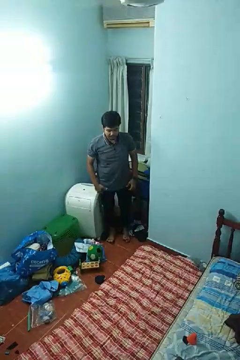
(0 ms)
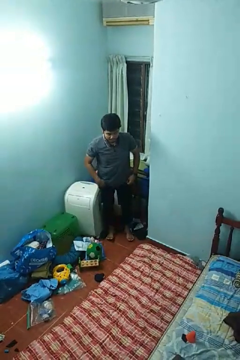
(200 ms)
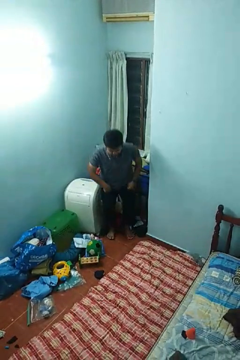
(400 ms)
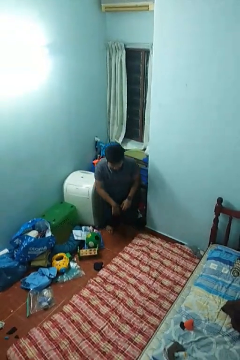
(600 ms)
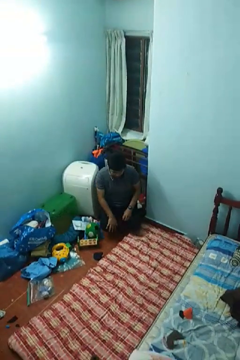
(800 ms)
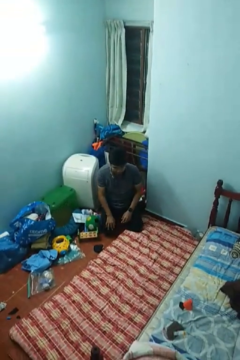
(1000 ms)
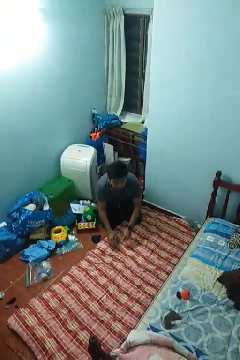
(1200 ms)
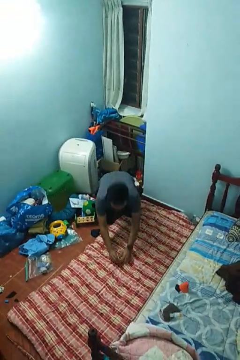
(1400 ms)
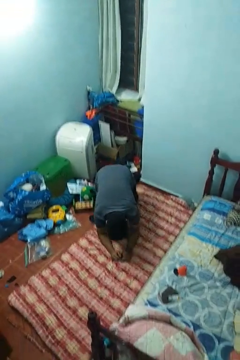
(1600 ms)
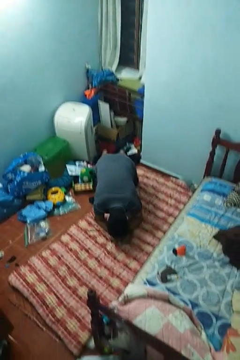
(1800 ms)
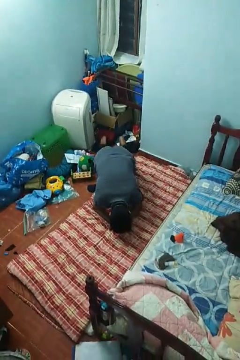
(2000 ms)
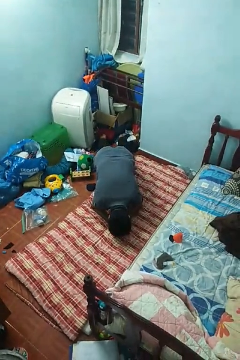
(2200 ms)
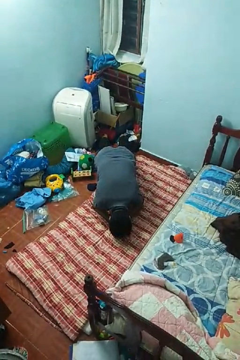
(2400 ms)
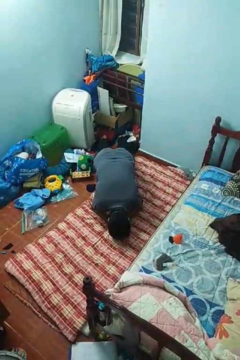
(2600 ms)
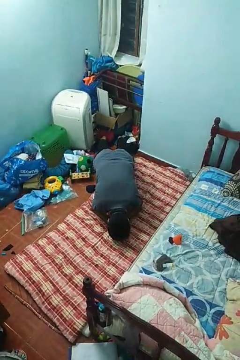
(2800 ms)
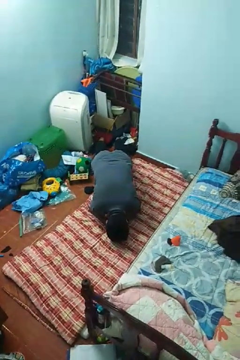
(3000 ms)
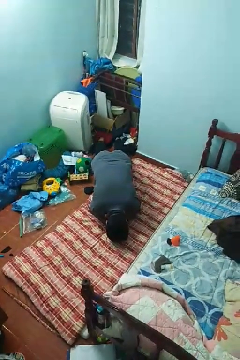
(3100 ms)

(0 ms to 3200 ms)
person exercises with plank

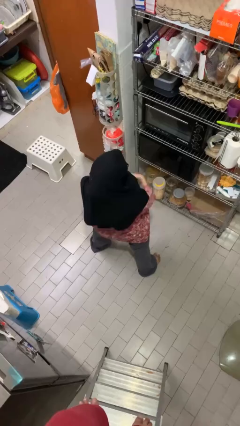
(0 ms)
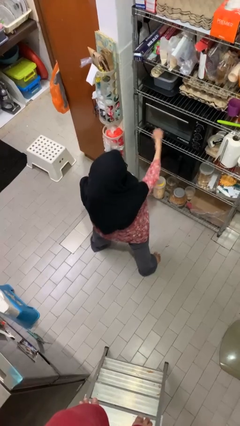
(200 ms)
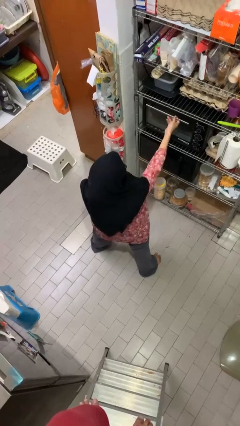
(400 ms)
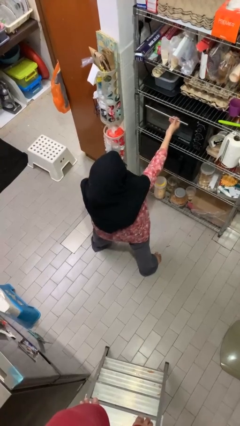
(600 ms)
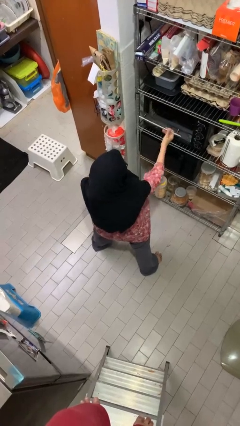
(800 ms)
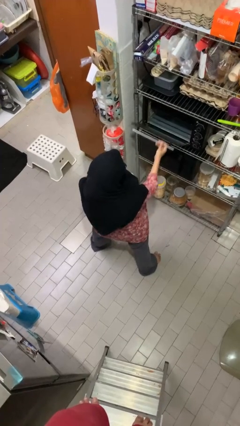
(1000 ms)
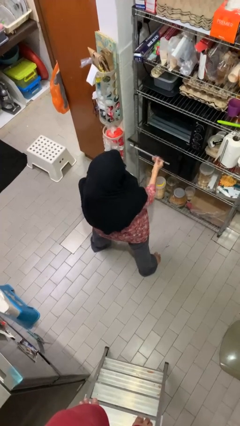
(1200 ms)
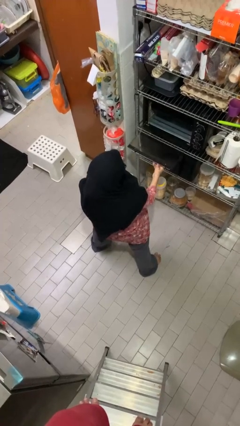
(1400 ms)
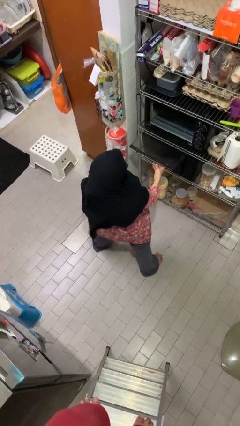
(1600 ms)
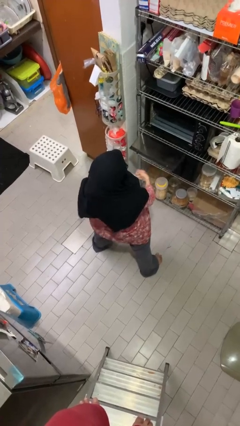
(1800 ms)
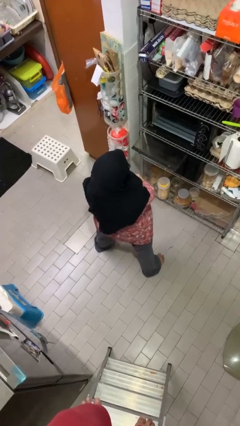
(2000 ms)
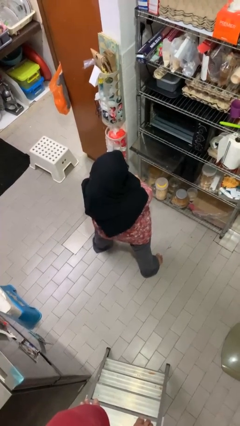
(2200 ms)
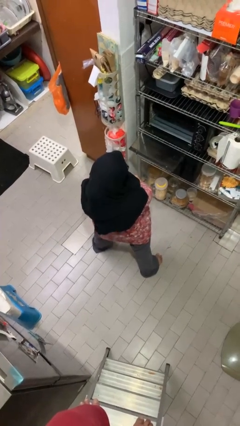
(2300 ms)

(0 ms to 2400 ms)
person opens oven door

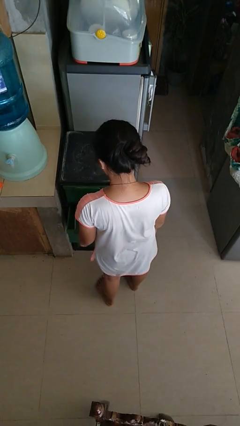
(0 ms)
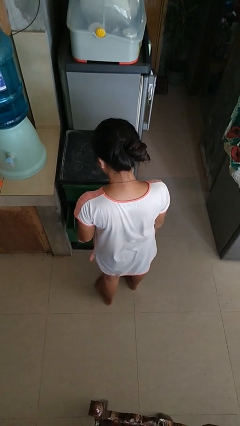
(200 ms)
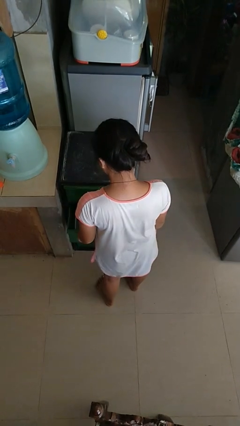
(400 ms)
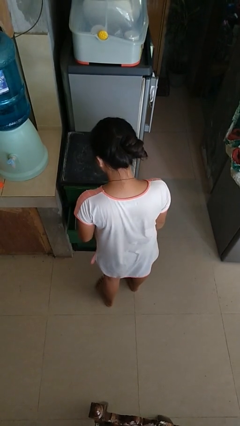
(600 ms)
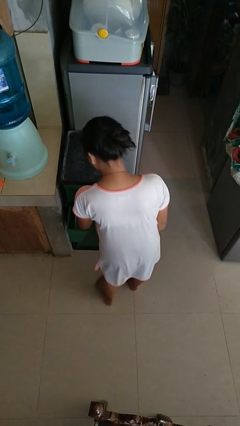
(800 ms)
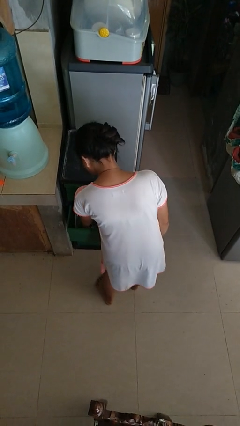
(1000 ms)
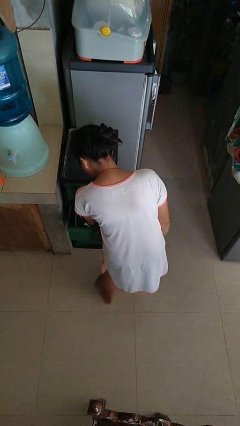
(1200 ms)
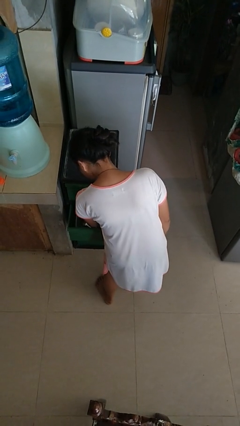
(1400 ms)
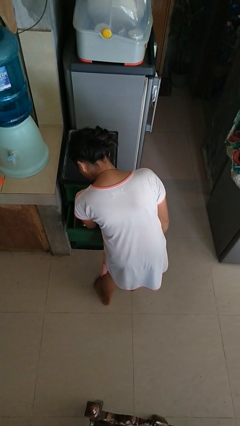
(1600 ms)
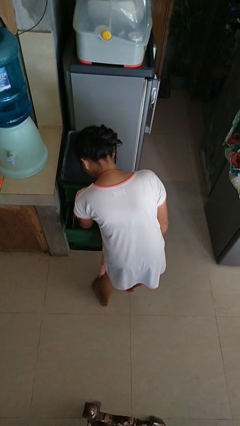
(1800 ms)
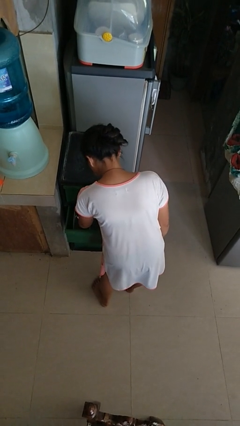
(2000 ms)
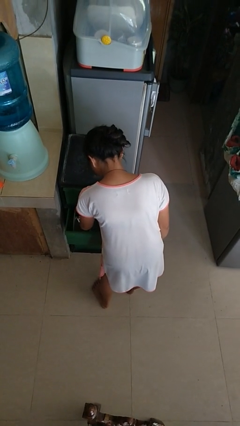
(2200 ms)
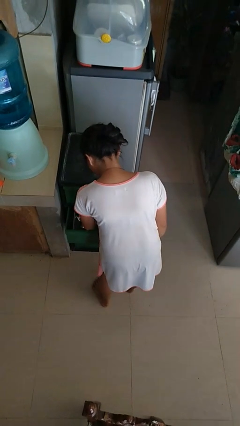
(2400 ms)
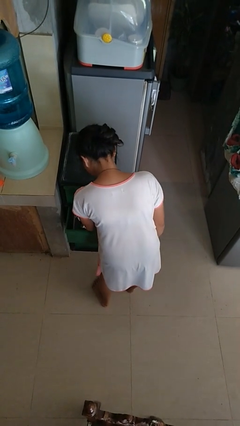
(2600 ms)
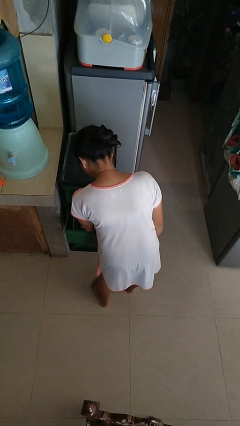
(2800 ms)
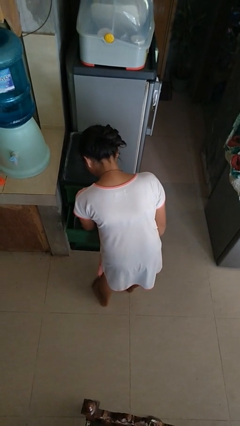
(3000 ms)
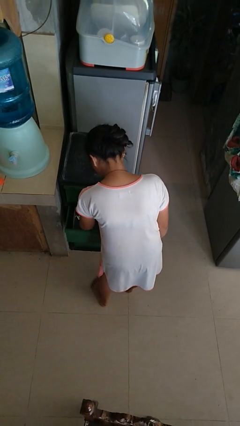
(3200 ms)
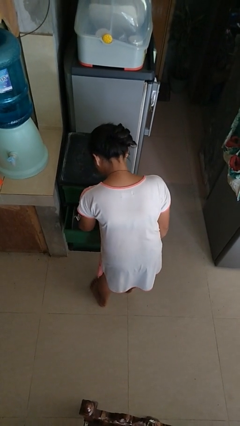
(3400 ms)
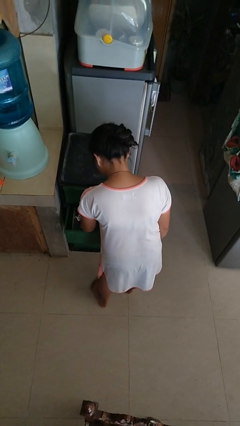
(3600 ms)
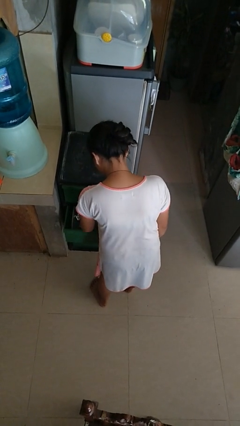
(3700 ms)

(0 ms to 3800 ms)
person searches in kitchen drawer

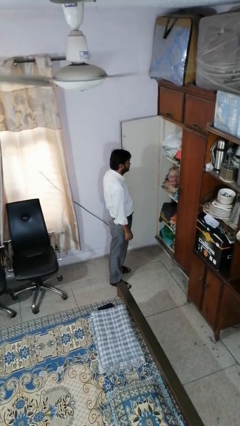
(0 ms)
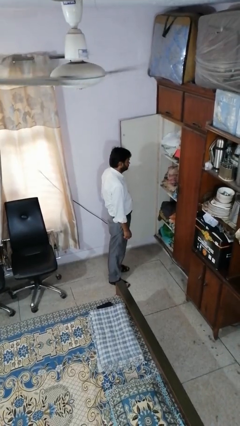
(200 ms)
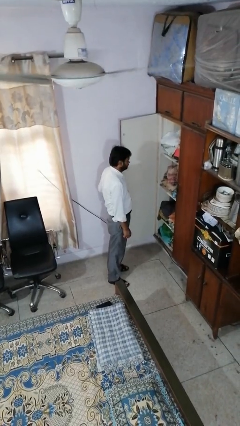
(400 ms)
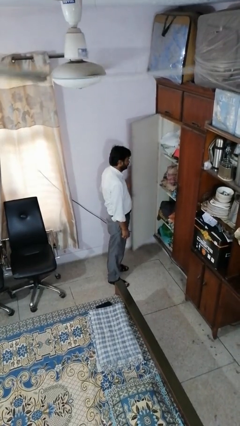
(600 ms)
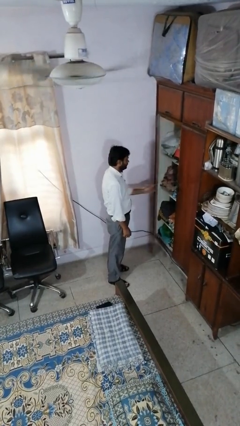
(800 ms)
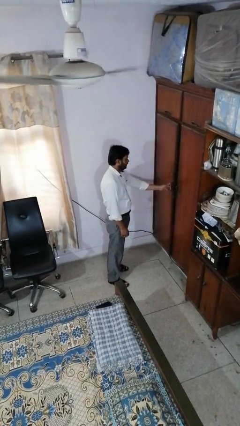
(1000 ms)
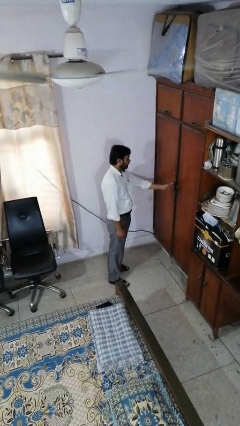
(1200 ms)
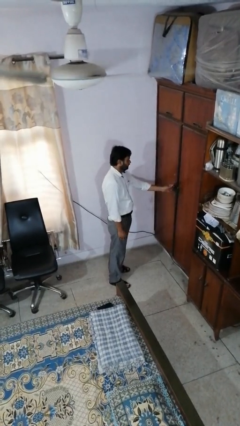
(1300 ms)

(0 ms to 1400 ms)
person closes closet door

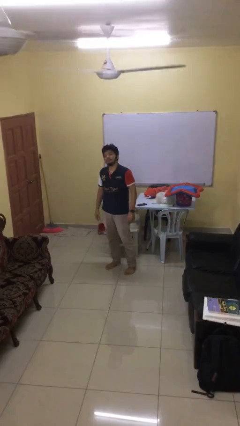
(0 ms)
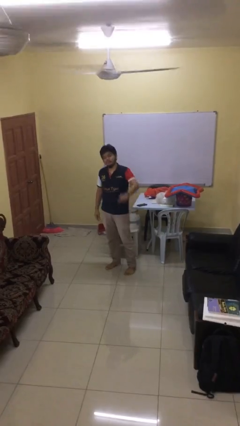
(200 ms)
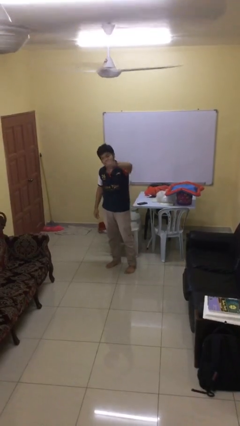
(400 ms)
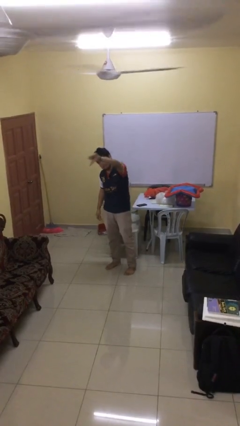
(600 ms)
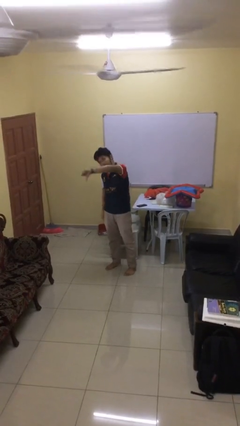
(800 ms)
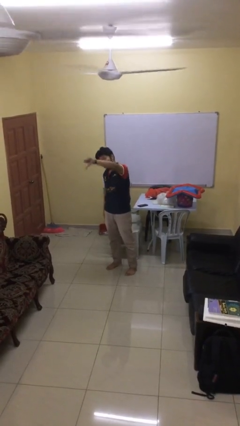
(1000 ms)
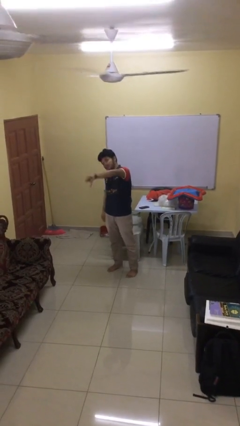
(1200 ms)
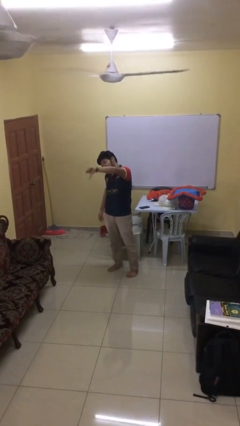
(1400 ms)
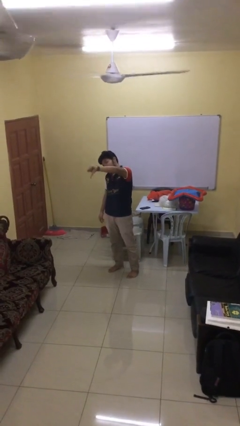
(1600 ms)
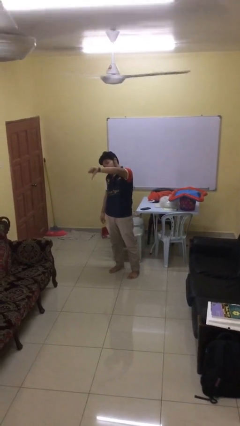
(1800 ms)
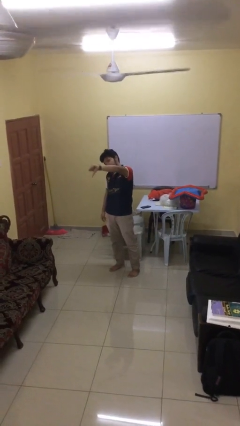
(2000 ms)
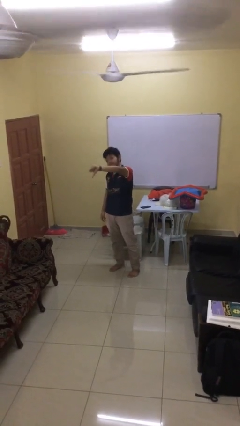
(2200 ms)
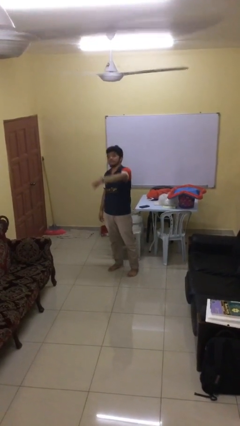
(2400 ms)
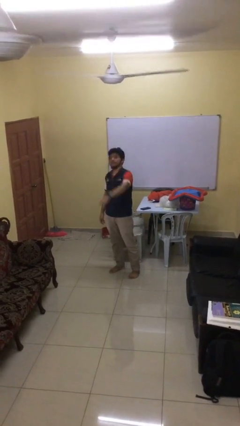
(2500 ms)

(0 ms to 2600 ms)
person gestures thumbs down

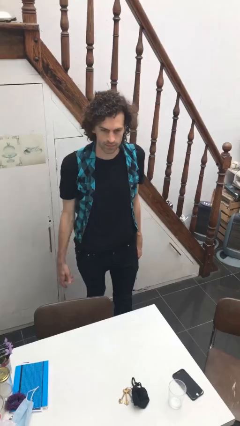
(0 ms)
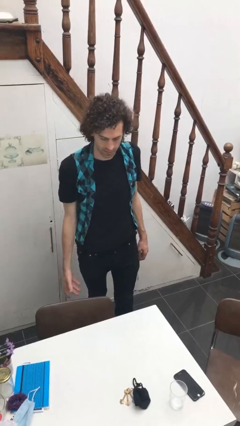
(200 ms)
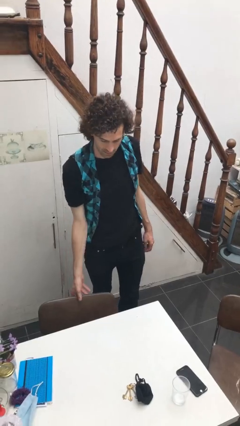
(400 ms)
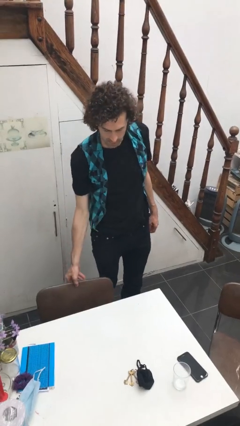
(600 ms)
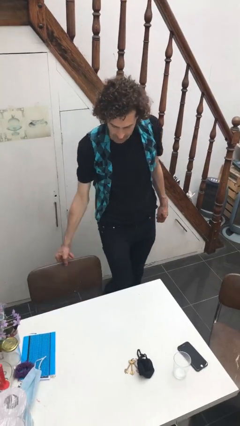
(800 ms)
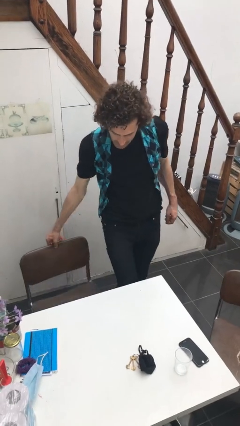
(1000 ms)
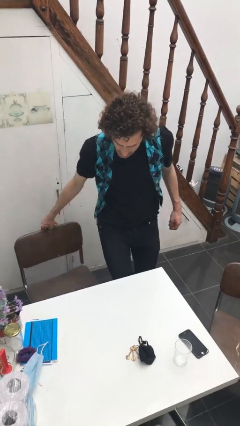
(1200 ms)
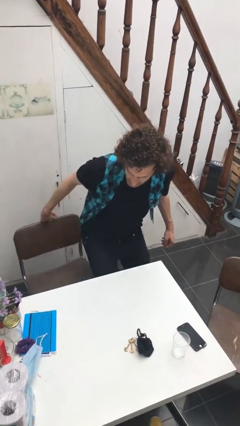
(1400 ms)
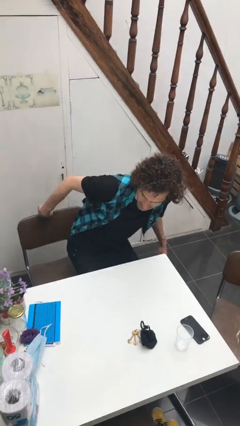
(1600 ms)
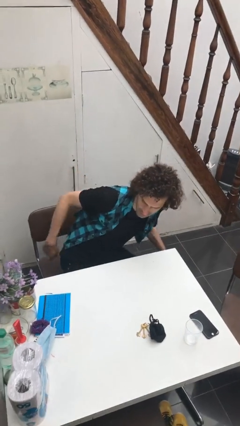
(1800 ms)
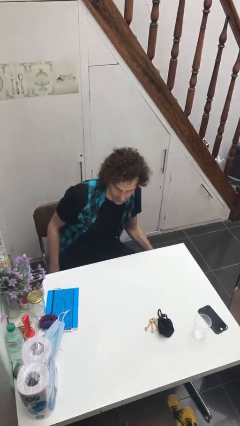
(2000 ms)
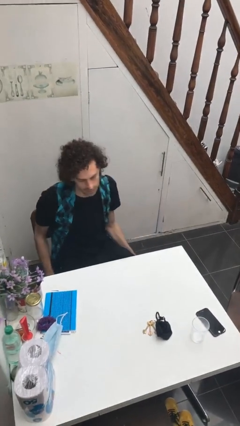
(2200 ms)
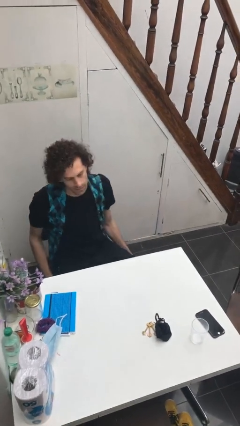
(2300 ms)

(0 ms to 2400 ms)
person sits down

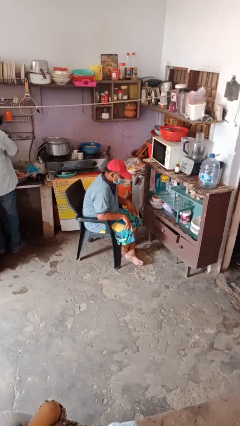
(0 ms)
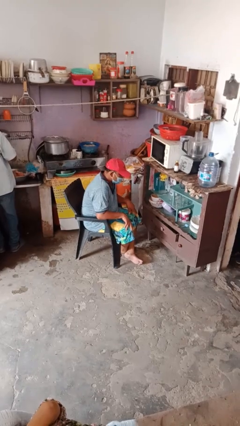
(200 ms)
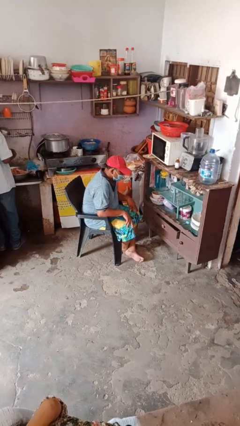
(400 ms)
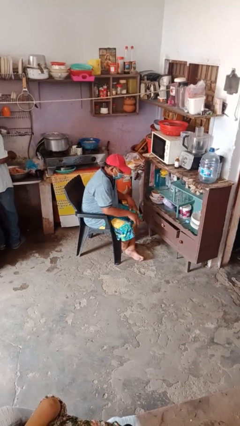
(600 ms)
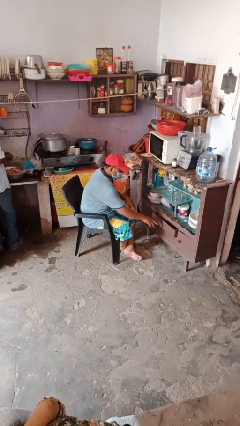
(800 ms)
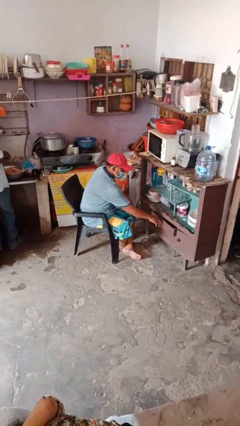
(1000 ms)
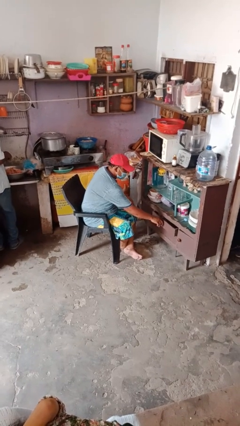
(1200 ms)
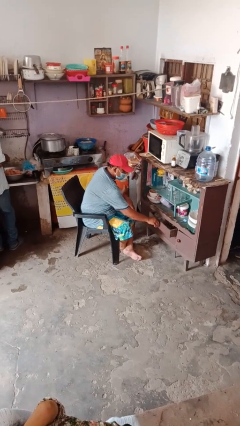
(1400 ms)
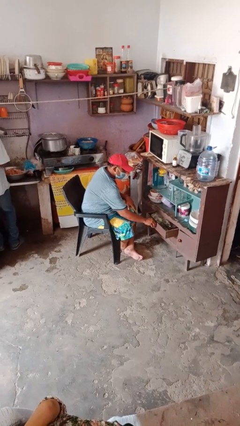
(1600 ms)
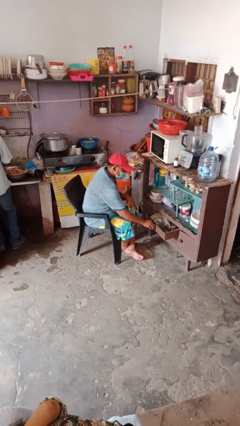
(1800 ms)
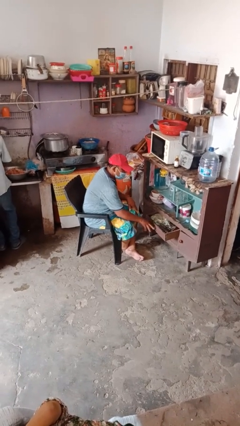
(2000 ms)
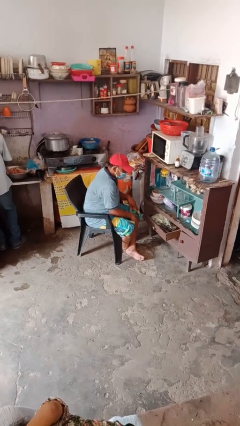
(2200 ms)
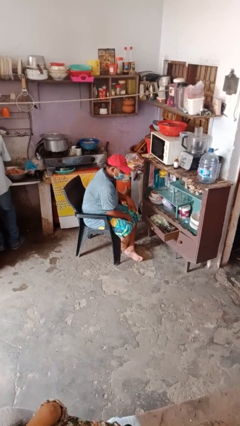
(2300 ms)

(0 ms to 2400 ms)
person opens dresser drawer
